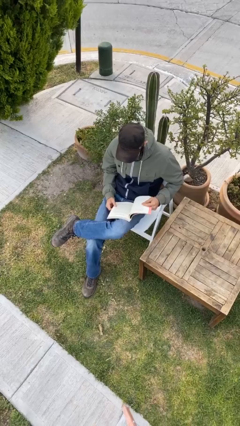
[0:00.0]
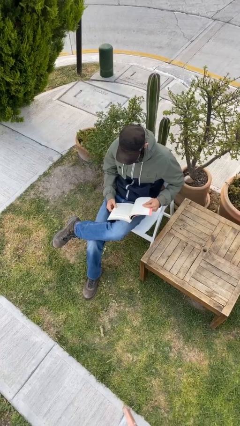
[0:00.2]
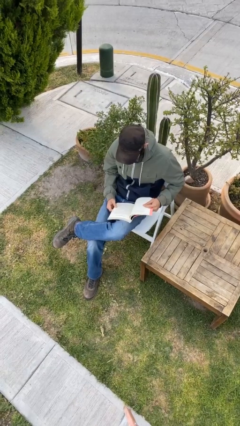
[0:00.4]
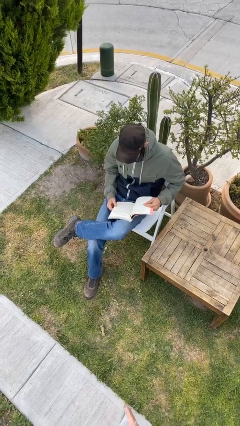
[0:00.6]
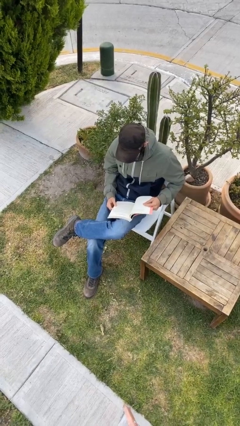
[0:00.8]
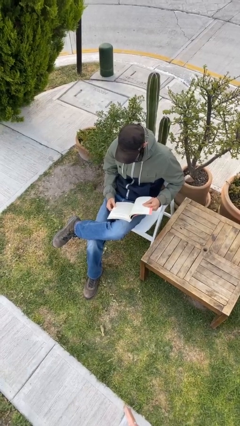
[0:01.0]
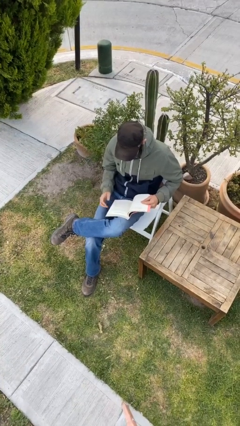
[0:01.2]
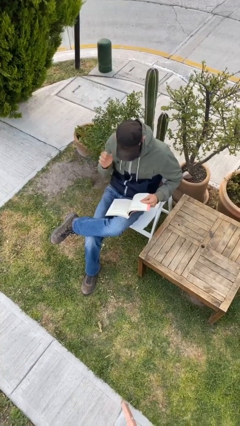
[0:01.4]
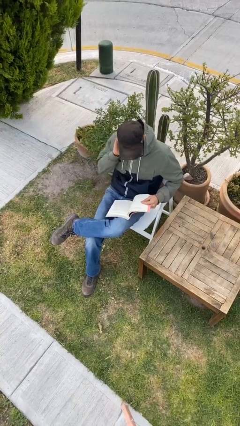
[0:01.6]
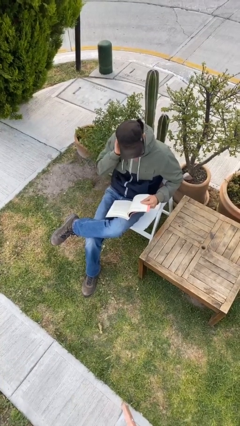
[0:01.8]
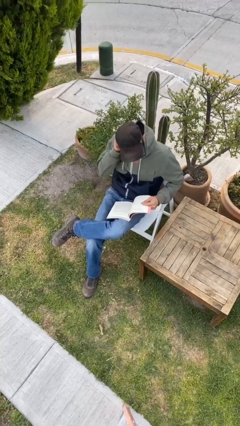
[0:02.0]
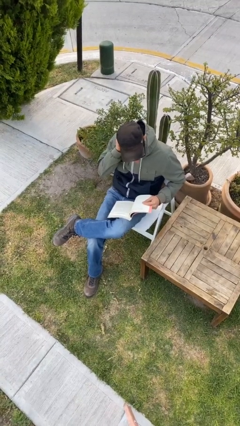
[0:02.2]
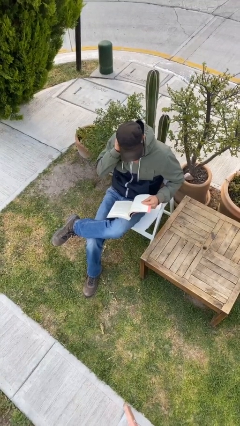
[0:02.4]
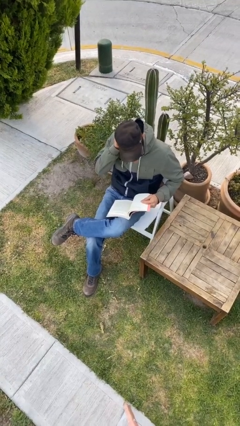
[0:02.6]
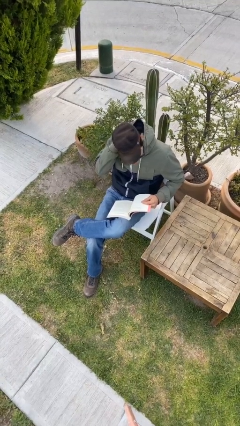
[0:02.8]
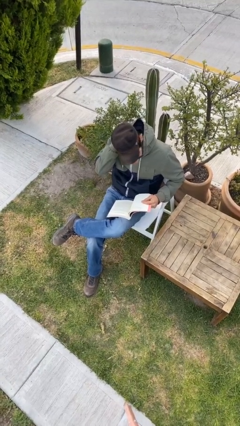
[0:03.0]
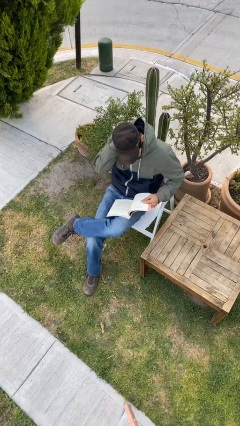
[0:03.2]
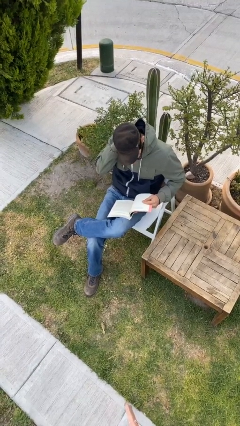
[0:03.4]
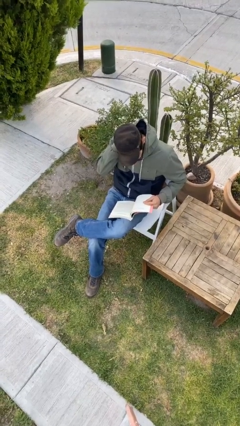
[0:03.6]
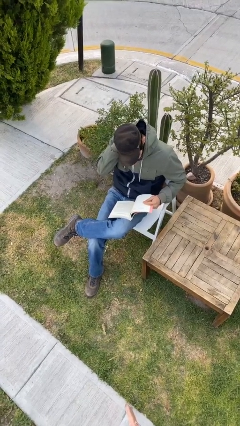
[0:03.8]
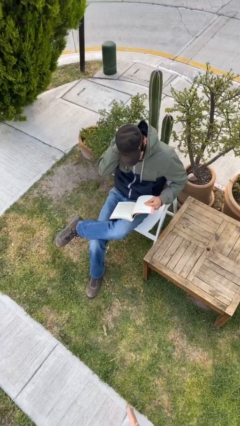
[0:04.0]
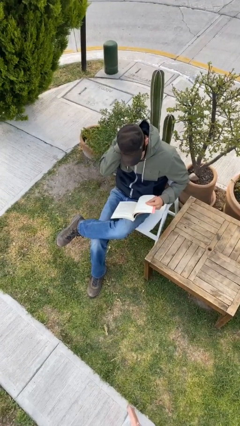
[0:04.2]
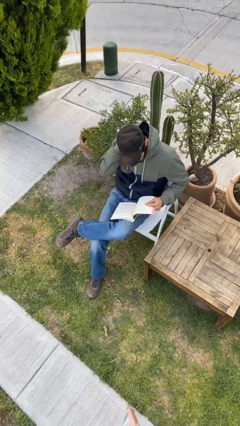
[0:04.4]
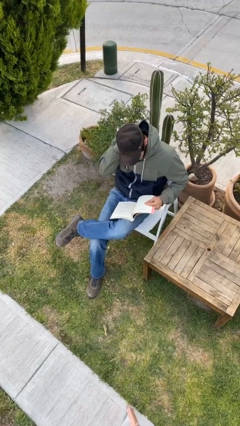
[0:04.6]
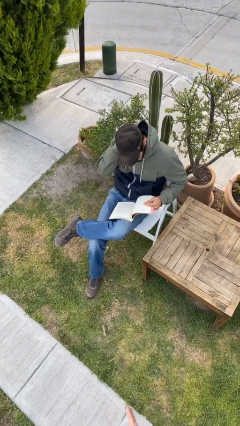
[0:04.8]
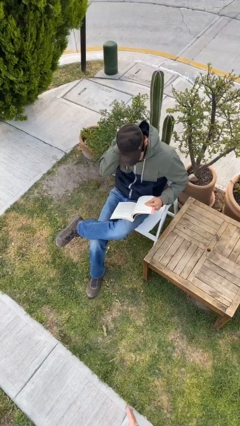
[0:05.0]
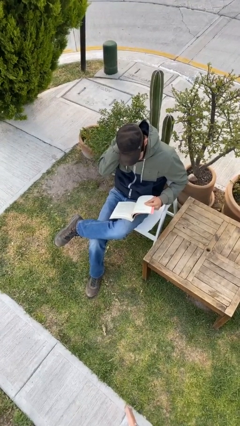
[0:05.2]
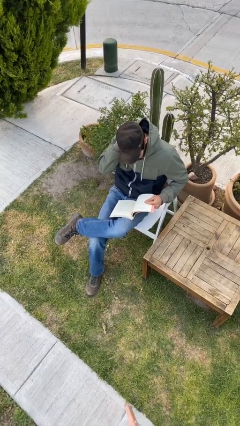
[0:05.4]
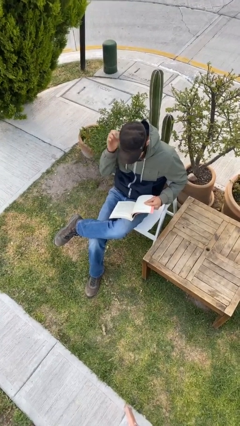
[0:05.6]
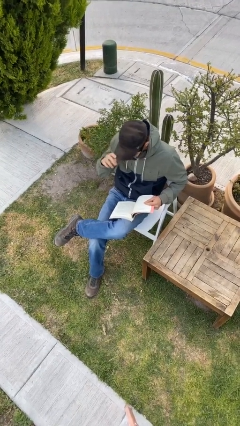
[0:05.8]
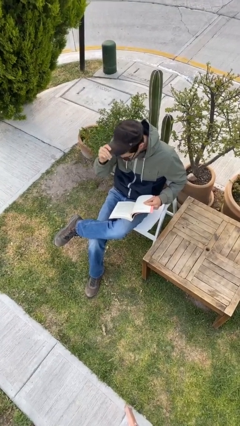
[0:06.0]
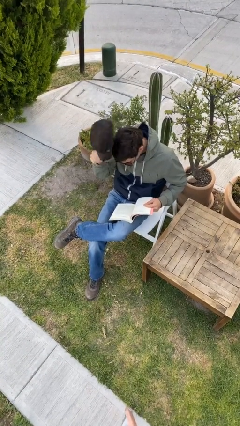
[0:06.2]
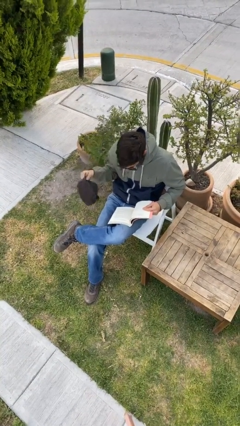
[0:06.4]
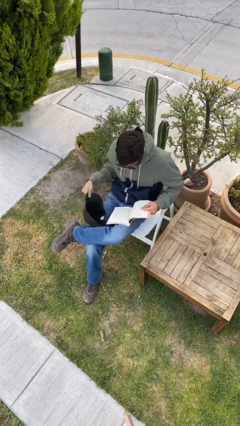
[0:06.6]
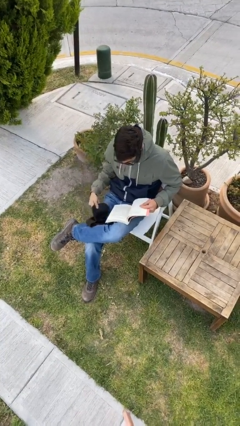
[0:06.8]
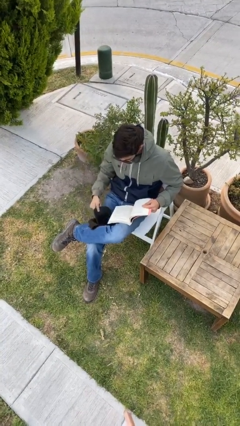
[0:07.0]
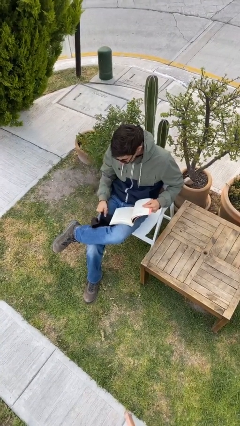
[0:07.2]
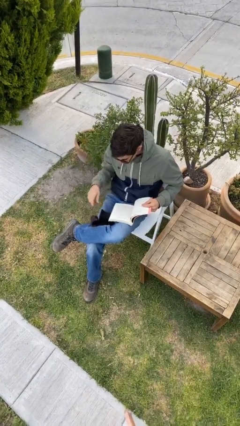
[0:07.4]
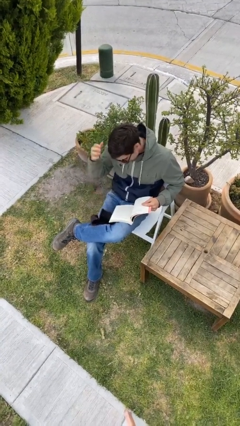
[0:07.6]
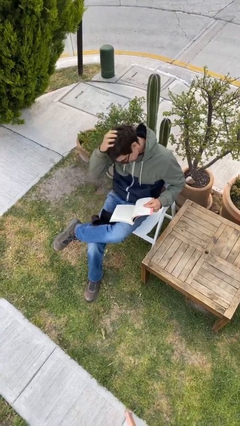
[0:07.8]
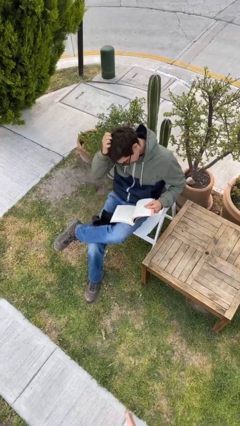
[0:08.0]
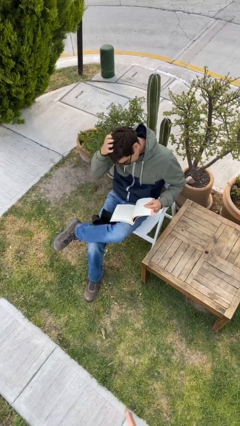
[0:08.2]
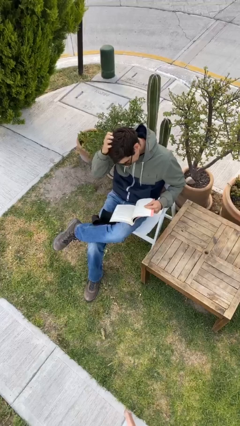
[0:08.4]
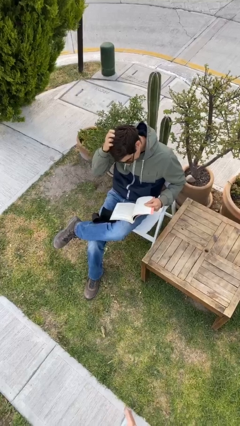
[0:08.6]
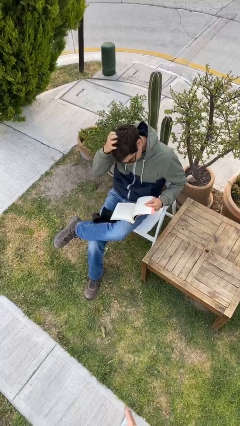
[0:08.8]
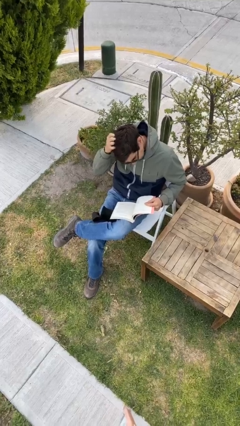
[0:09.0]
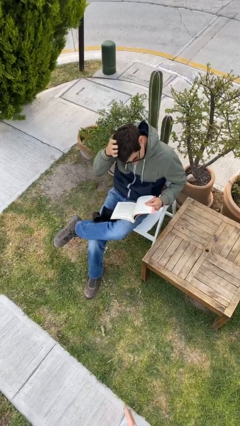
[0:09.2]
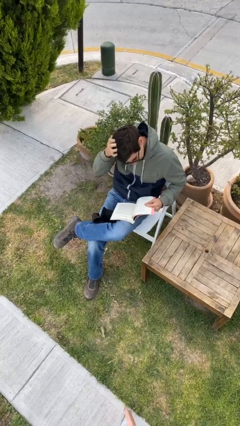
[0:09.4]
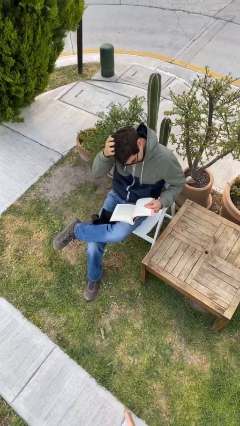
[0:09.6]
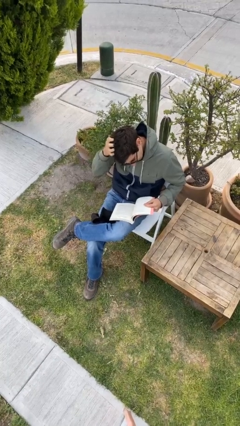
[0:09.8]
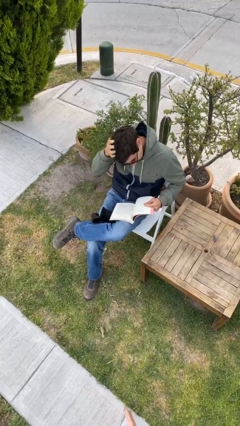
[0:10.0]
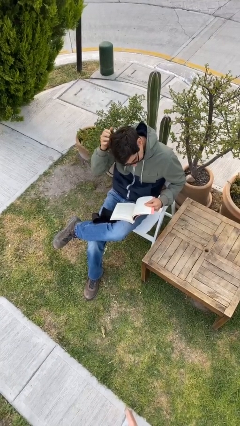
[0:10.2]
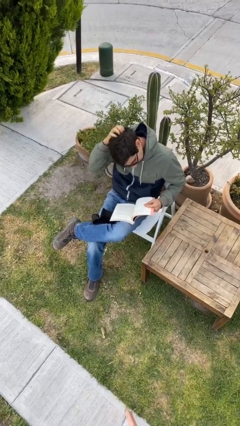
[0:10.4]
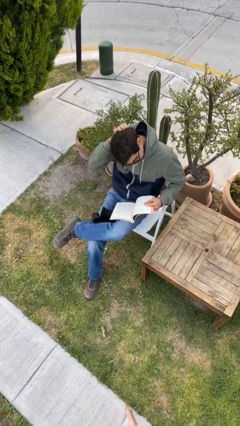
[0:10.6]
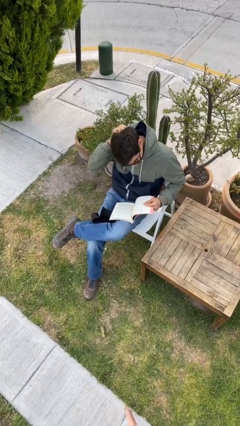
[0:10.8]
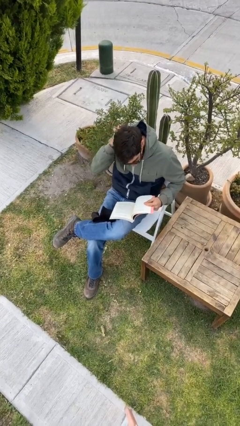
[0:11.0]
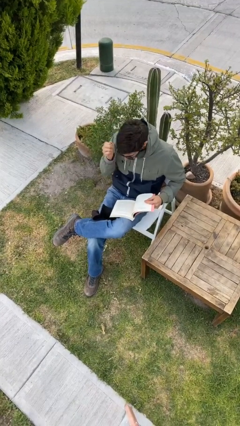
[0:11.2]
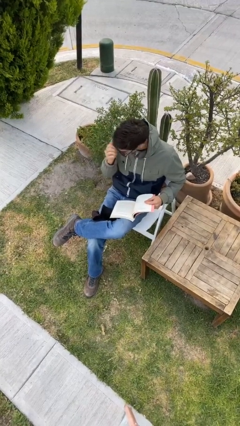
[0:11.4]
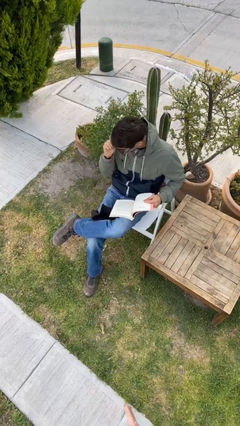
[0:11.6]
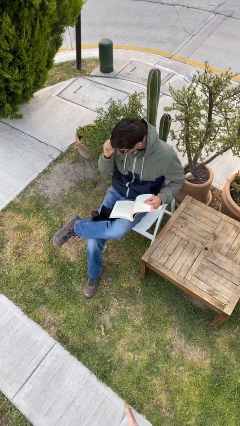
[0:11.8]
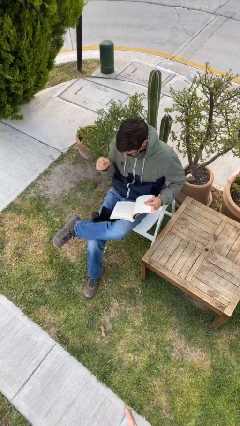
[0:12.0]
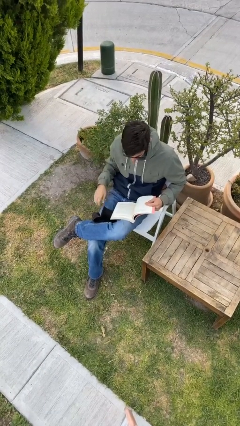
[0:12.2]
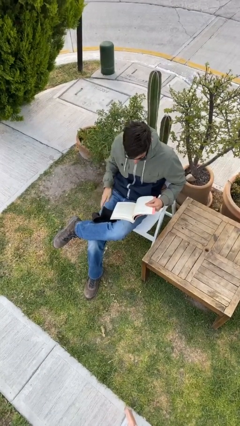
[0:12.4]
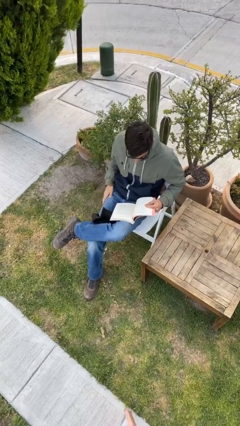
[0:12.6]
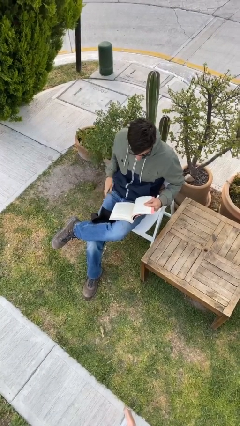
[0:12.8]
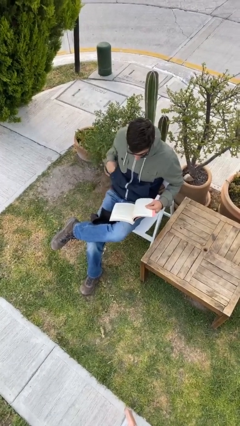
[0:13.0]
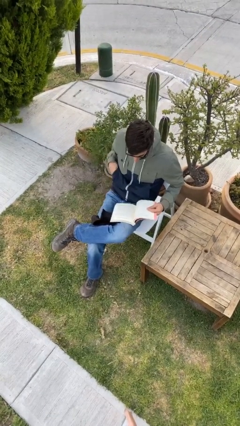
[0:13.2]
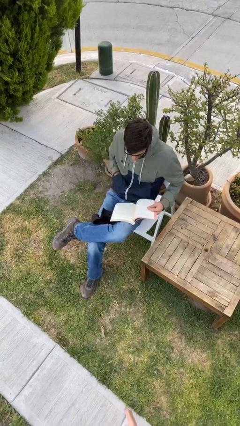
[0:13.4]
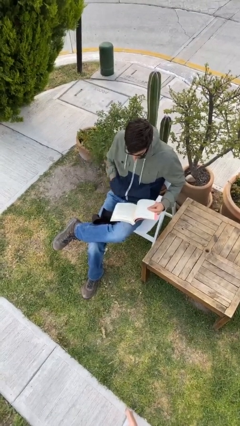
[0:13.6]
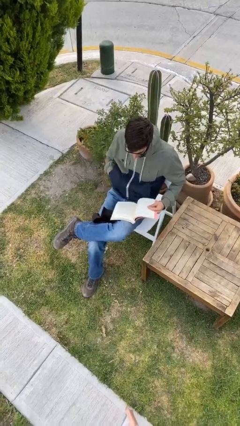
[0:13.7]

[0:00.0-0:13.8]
person reads document

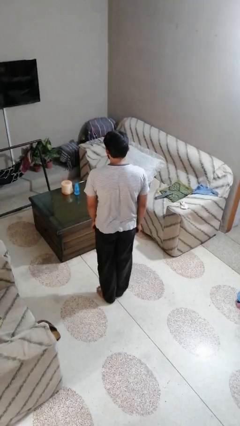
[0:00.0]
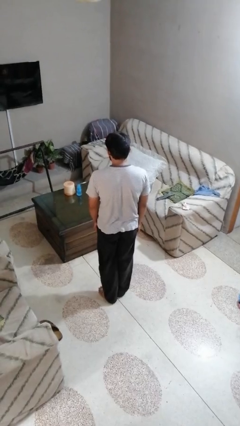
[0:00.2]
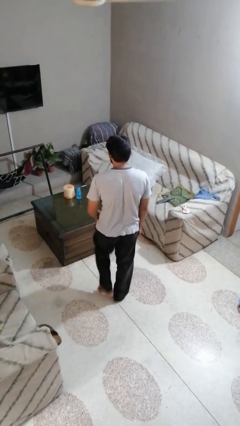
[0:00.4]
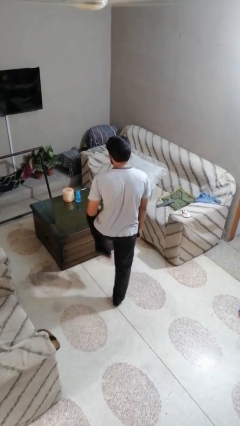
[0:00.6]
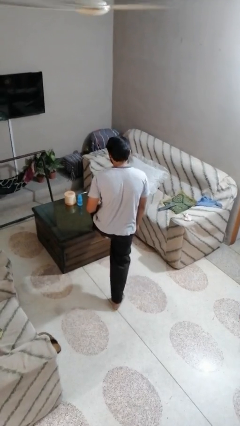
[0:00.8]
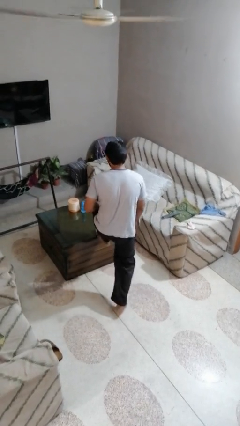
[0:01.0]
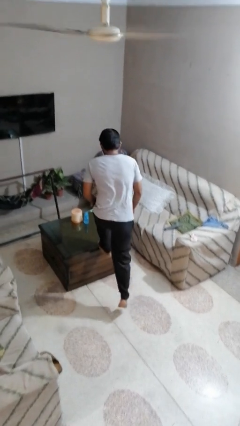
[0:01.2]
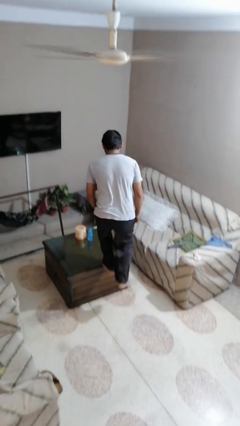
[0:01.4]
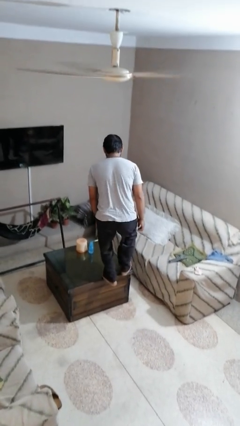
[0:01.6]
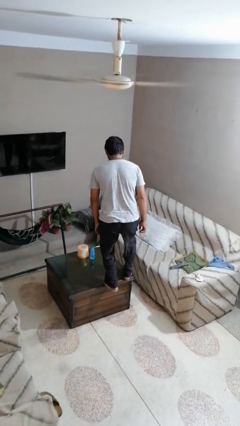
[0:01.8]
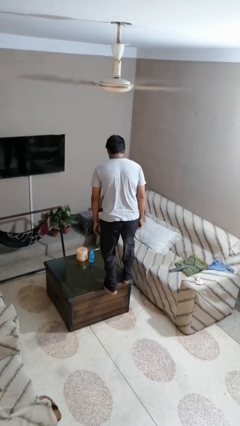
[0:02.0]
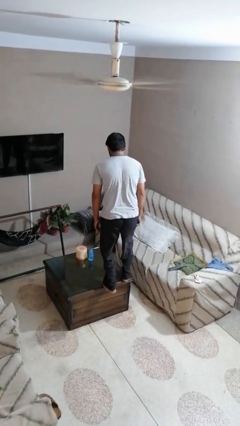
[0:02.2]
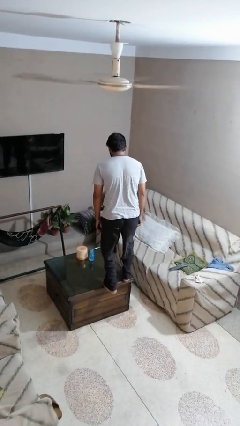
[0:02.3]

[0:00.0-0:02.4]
person climbs on table

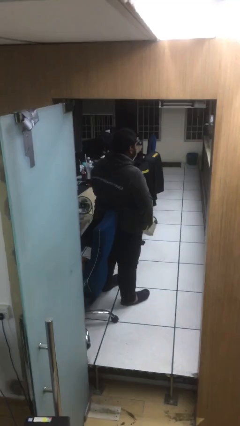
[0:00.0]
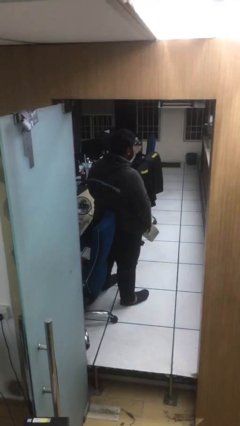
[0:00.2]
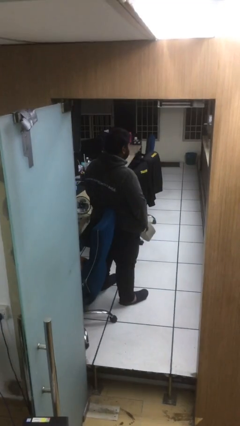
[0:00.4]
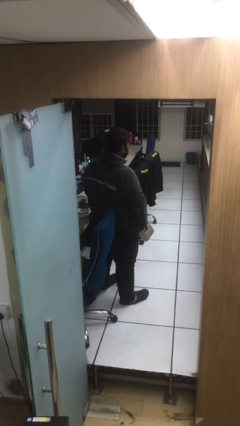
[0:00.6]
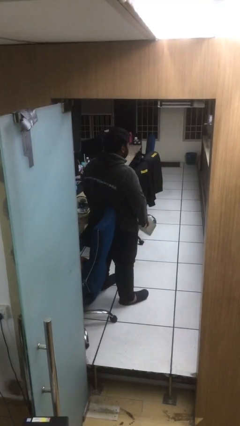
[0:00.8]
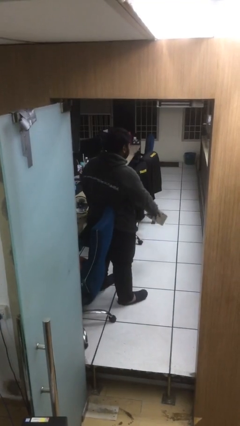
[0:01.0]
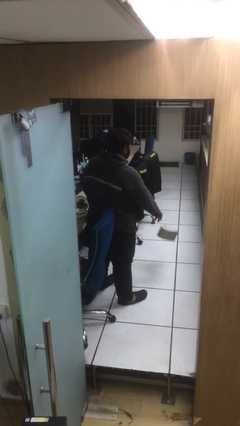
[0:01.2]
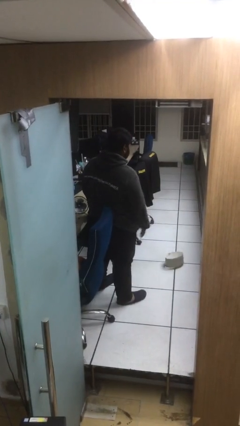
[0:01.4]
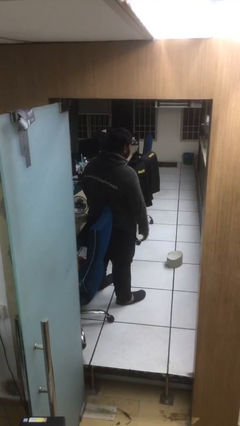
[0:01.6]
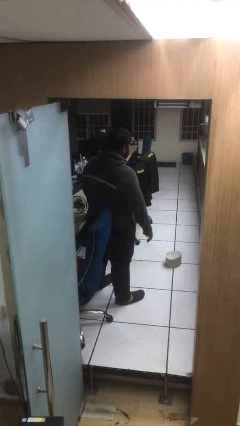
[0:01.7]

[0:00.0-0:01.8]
person throws object to ground
